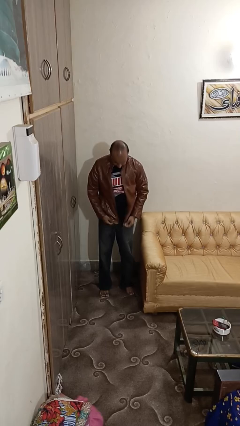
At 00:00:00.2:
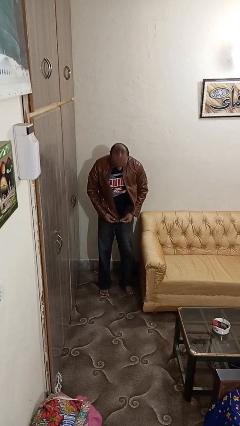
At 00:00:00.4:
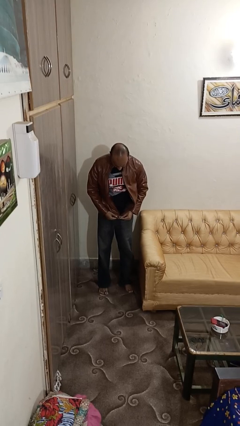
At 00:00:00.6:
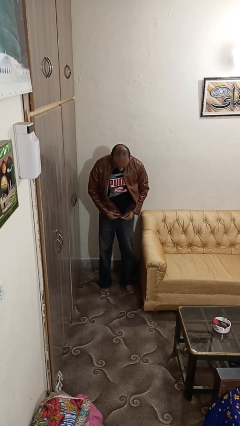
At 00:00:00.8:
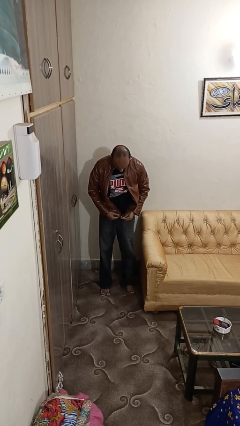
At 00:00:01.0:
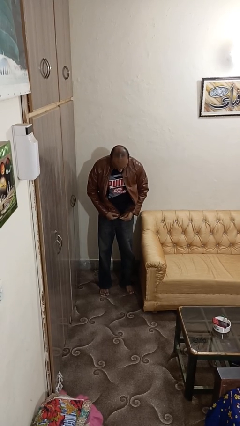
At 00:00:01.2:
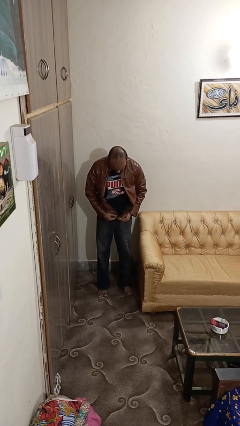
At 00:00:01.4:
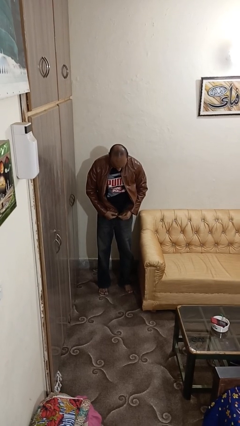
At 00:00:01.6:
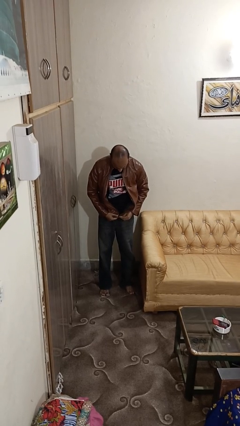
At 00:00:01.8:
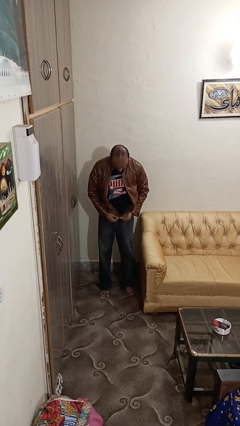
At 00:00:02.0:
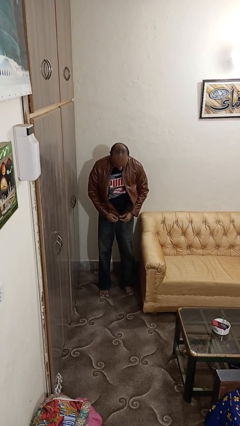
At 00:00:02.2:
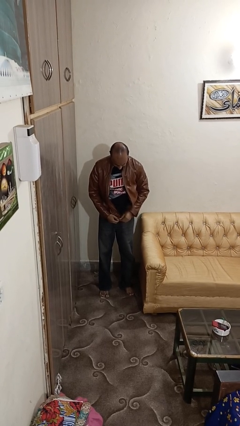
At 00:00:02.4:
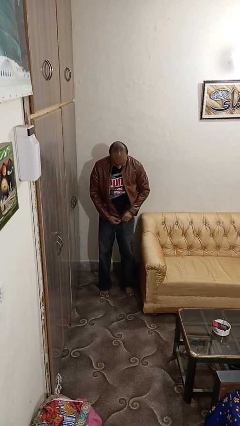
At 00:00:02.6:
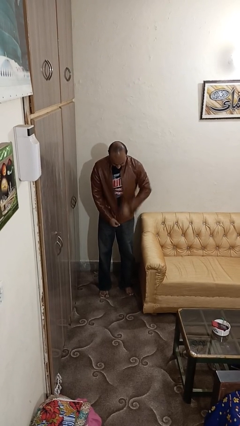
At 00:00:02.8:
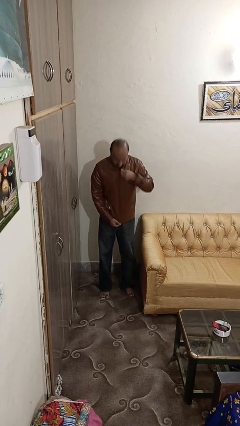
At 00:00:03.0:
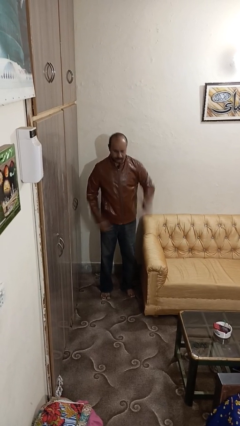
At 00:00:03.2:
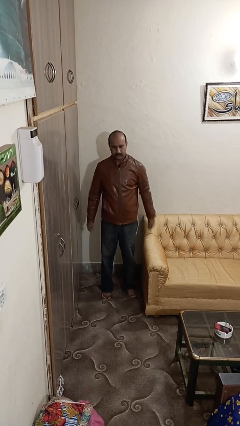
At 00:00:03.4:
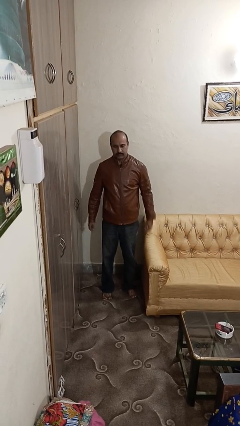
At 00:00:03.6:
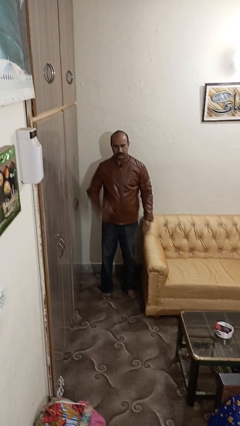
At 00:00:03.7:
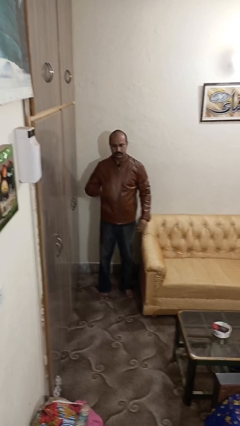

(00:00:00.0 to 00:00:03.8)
person zips up jacket

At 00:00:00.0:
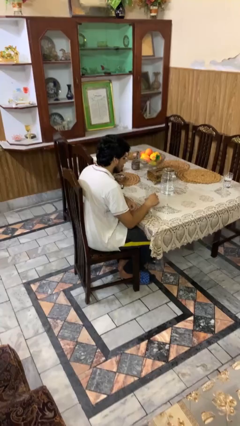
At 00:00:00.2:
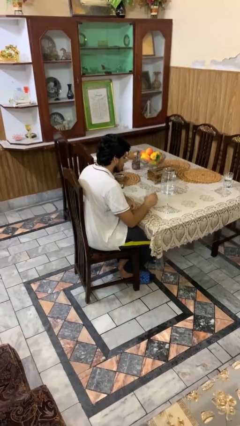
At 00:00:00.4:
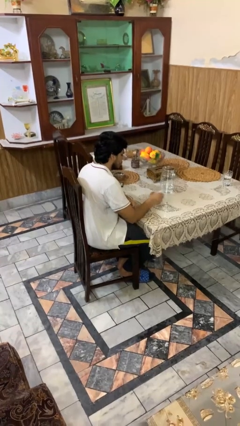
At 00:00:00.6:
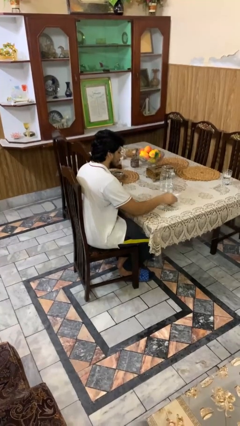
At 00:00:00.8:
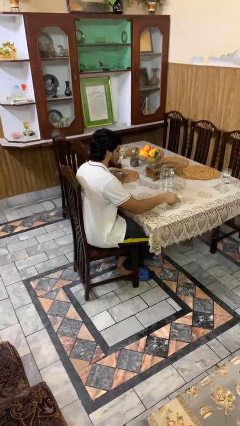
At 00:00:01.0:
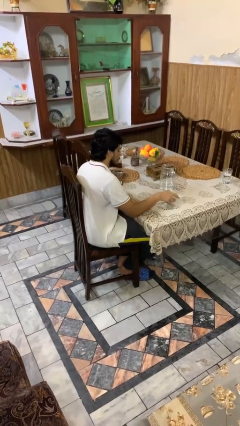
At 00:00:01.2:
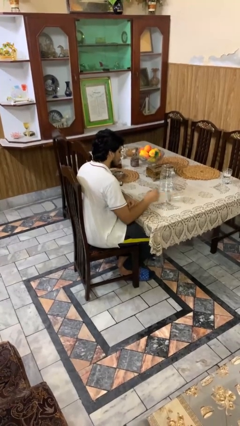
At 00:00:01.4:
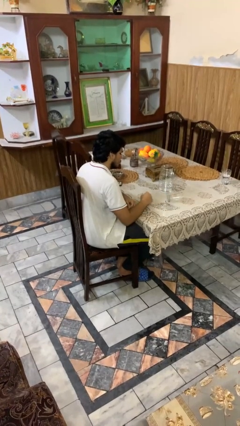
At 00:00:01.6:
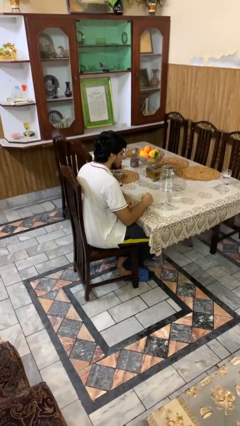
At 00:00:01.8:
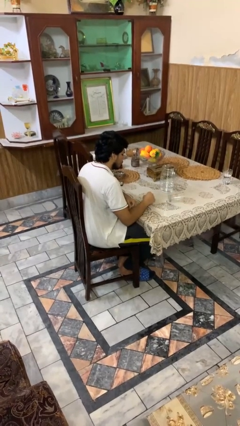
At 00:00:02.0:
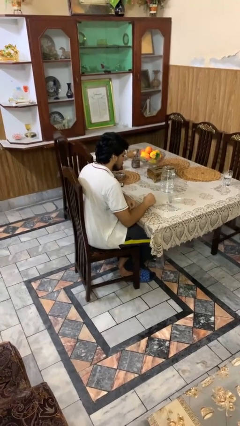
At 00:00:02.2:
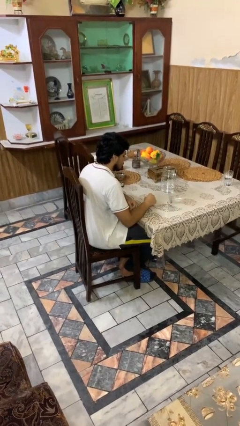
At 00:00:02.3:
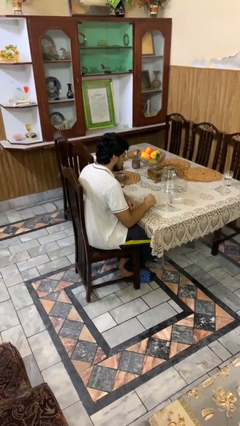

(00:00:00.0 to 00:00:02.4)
person knocks over glass

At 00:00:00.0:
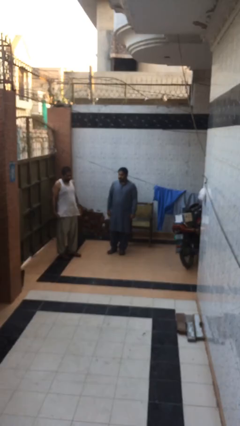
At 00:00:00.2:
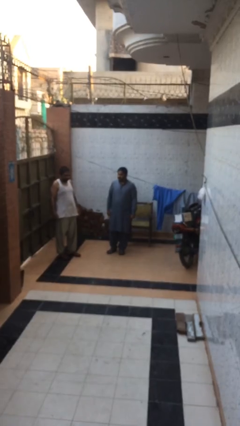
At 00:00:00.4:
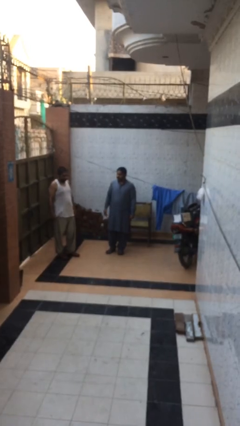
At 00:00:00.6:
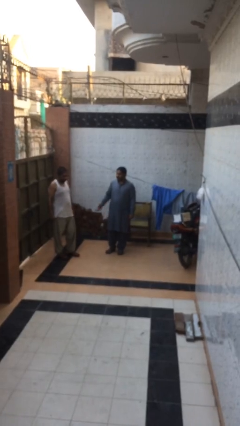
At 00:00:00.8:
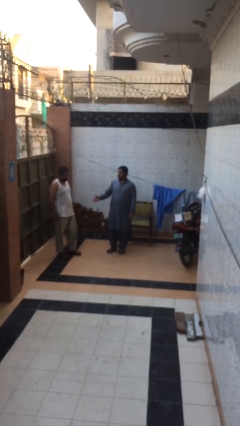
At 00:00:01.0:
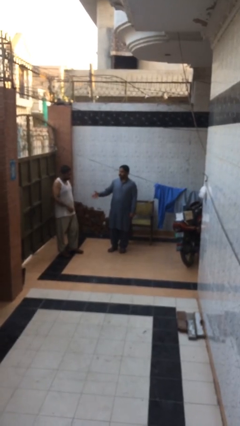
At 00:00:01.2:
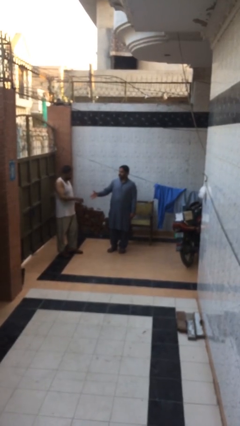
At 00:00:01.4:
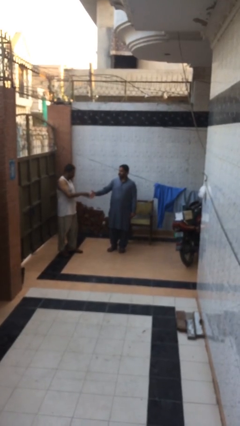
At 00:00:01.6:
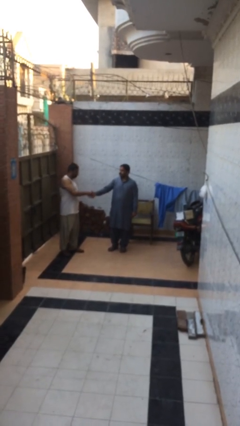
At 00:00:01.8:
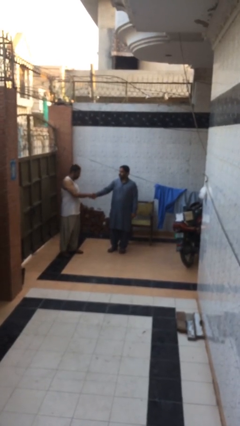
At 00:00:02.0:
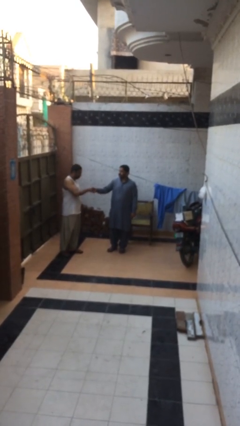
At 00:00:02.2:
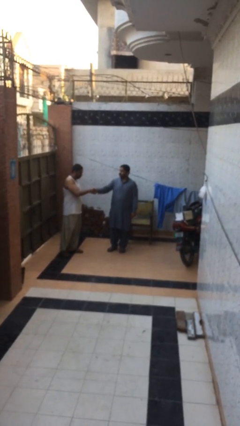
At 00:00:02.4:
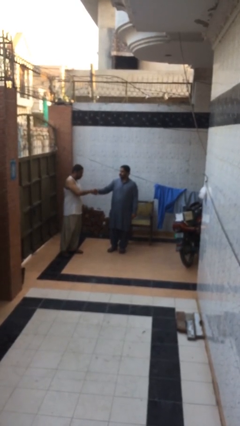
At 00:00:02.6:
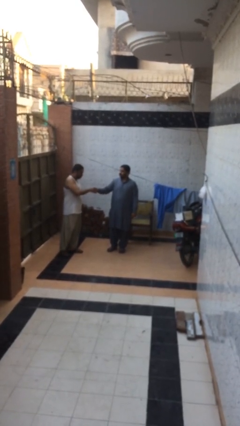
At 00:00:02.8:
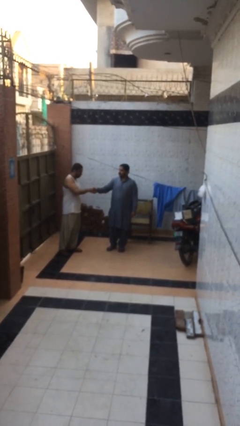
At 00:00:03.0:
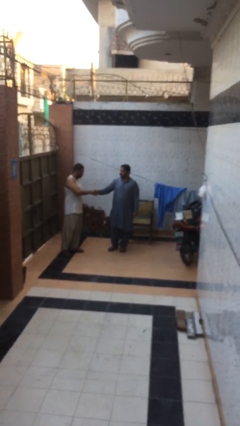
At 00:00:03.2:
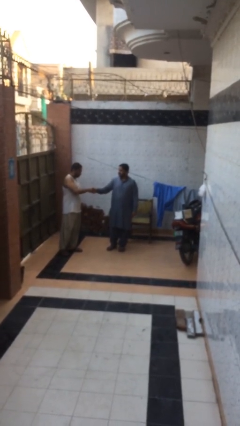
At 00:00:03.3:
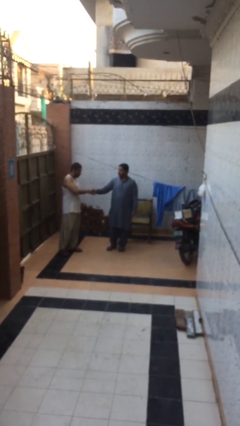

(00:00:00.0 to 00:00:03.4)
person shakes hand

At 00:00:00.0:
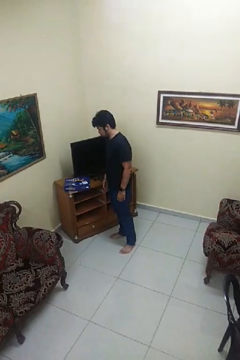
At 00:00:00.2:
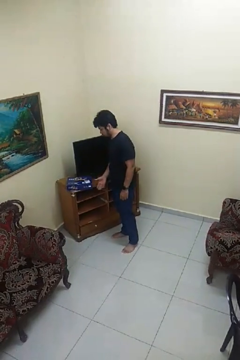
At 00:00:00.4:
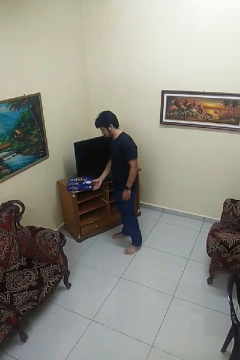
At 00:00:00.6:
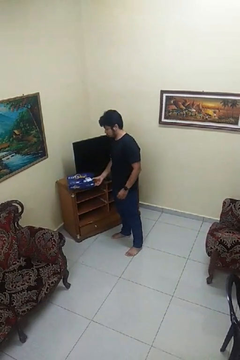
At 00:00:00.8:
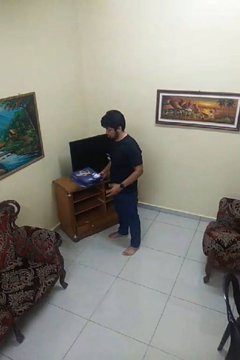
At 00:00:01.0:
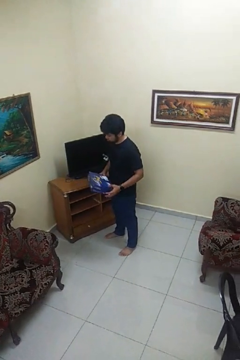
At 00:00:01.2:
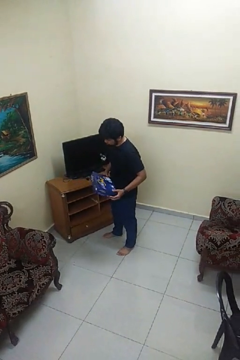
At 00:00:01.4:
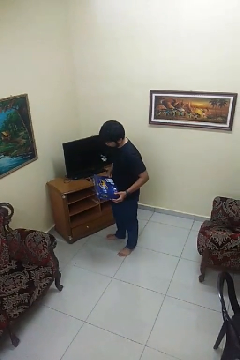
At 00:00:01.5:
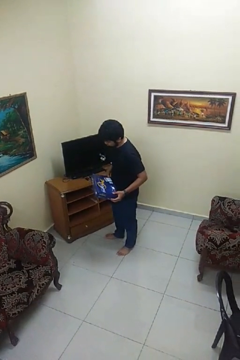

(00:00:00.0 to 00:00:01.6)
person picks up object from countertop

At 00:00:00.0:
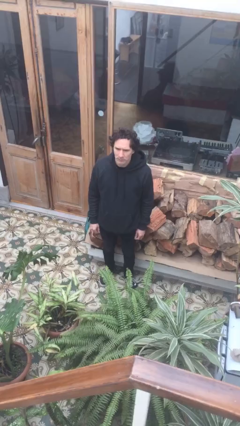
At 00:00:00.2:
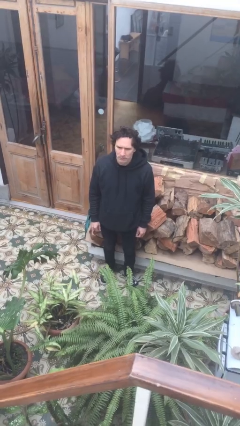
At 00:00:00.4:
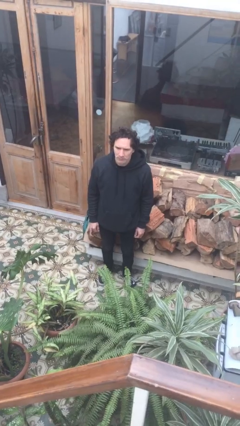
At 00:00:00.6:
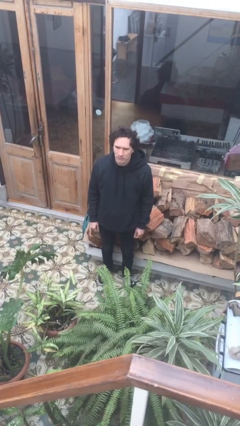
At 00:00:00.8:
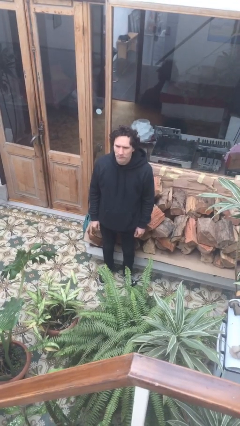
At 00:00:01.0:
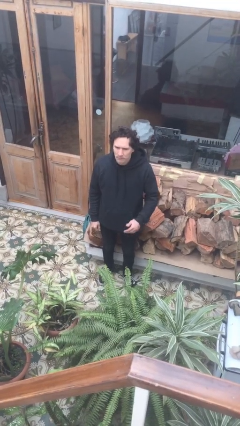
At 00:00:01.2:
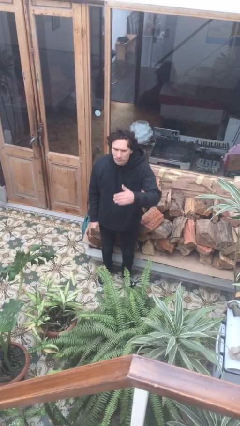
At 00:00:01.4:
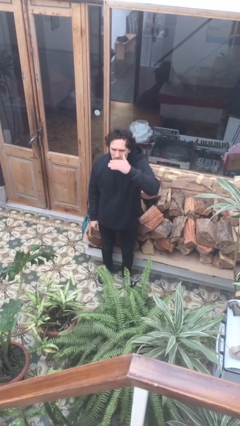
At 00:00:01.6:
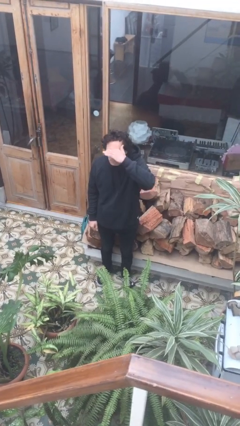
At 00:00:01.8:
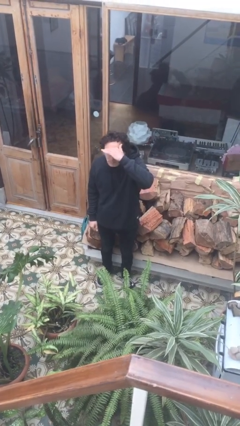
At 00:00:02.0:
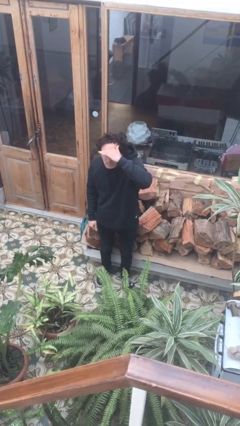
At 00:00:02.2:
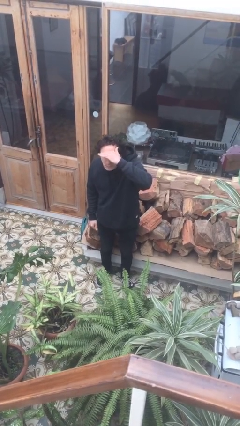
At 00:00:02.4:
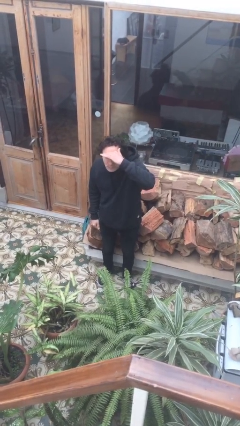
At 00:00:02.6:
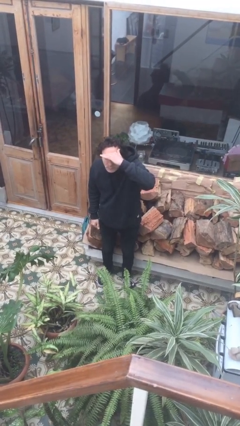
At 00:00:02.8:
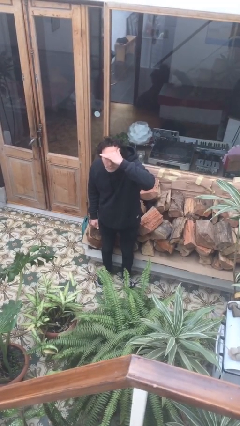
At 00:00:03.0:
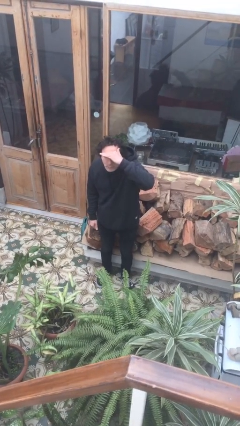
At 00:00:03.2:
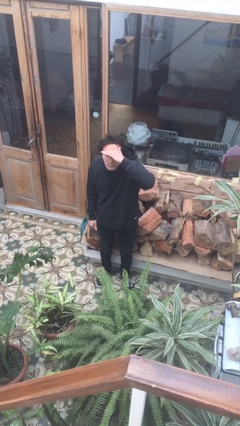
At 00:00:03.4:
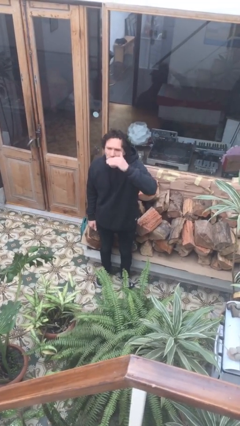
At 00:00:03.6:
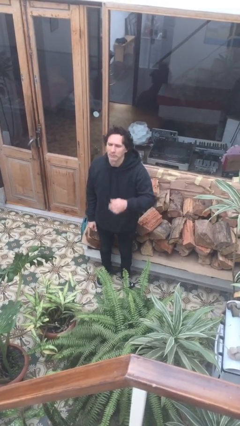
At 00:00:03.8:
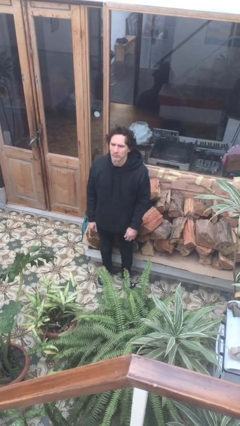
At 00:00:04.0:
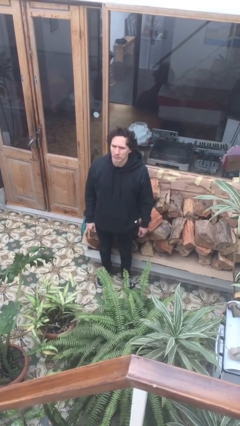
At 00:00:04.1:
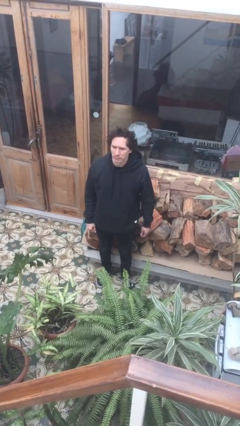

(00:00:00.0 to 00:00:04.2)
person shades eyes

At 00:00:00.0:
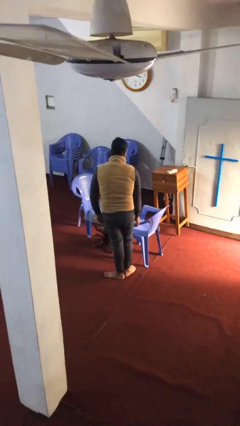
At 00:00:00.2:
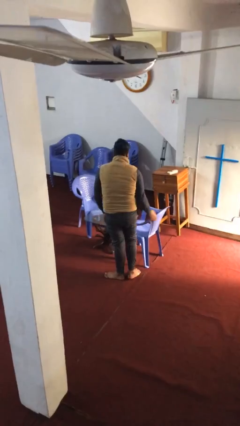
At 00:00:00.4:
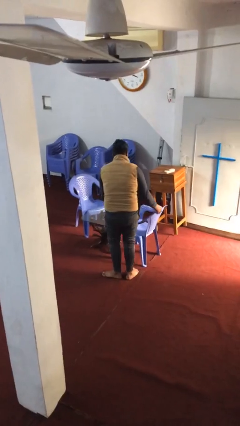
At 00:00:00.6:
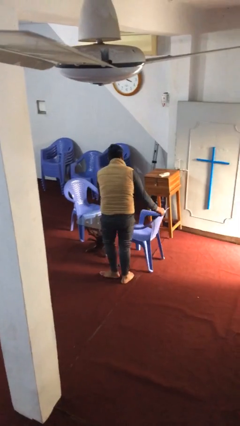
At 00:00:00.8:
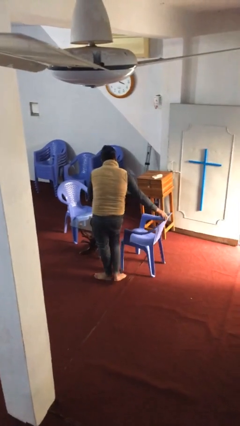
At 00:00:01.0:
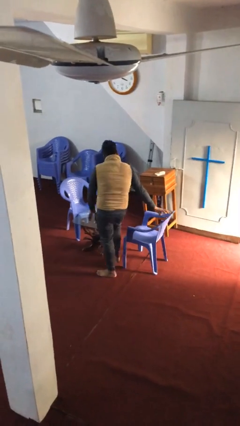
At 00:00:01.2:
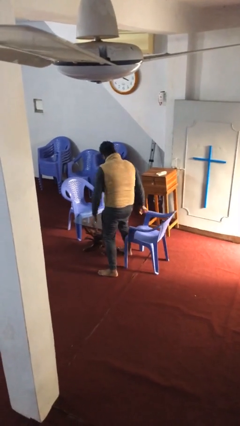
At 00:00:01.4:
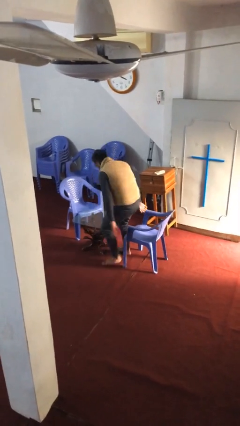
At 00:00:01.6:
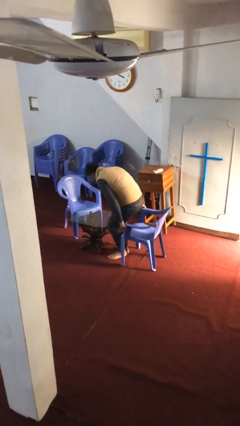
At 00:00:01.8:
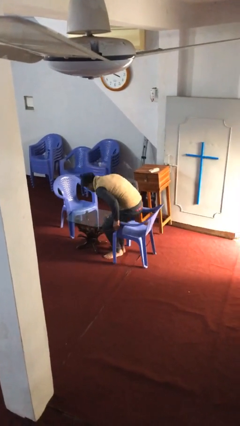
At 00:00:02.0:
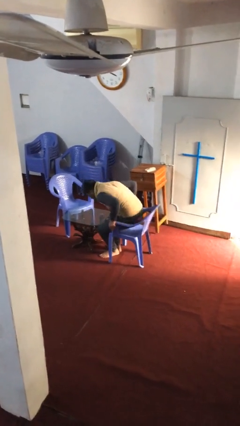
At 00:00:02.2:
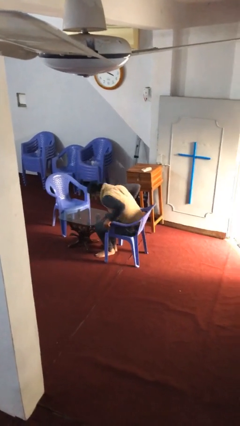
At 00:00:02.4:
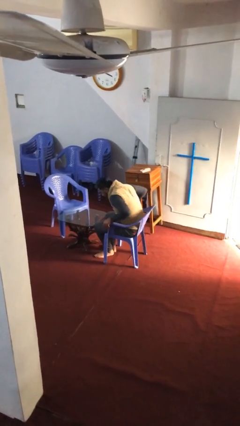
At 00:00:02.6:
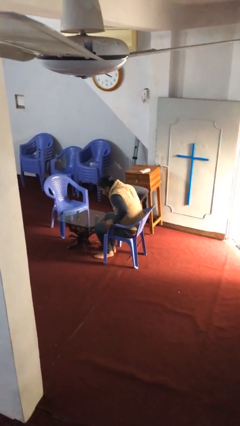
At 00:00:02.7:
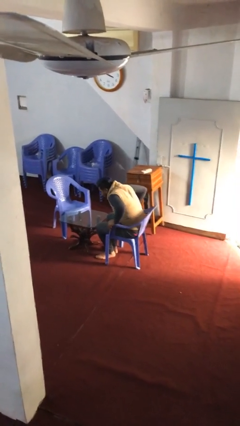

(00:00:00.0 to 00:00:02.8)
person sits down
